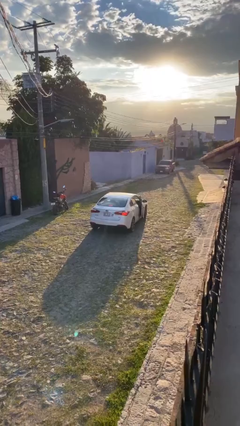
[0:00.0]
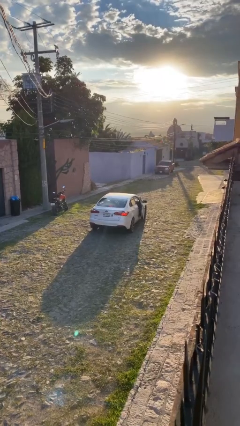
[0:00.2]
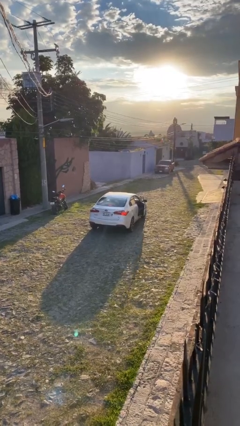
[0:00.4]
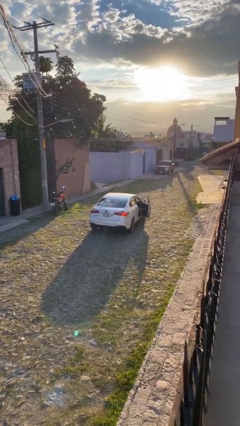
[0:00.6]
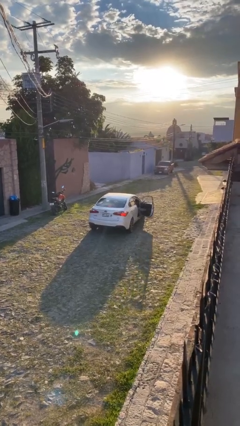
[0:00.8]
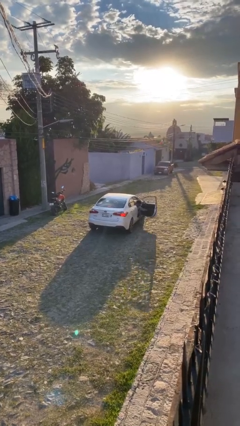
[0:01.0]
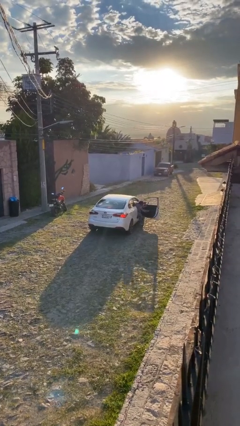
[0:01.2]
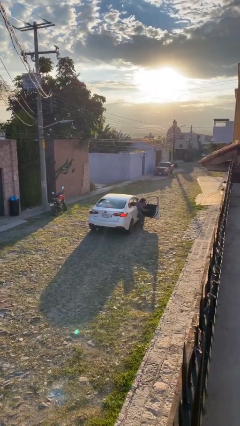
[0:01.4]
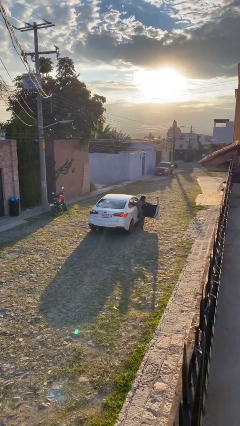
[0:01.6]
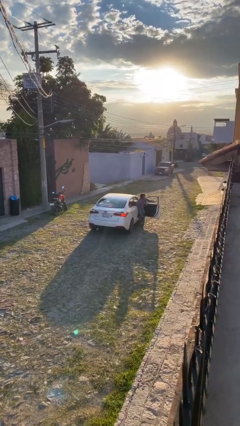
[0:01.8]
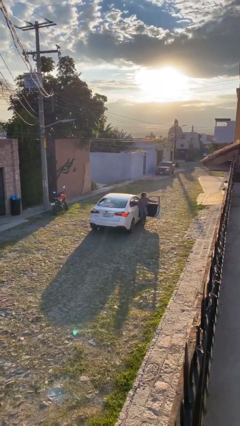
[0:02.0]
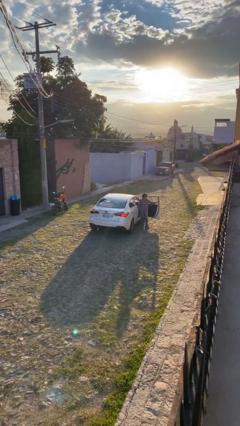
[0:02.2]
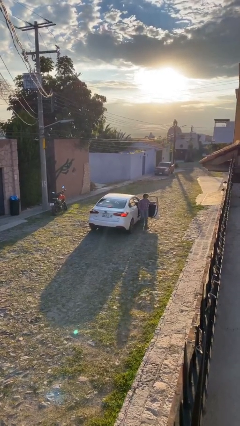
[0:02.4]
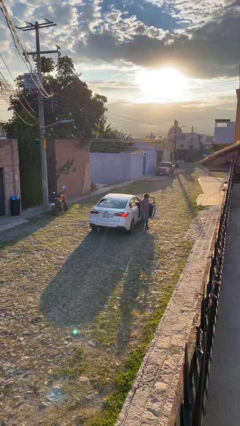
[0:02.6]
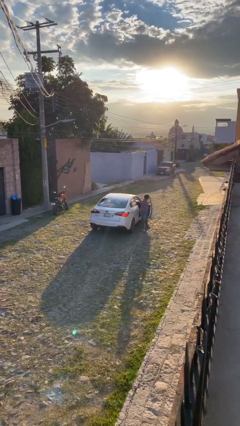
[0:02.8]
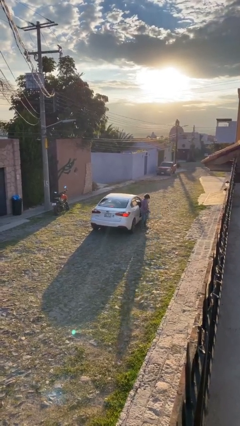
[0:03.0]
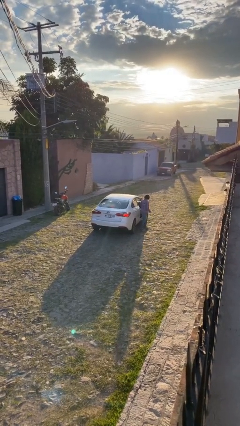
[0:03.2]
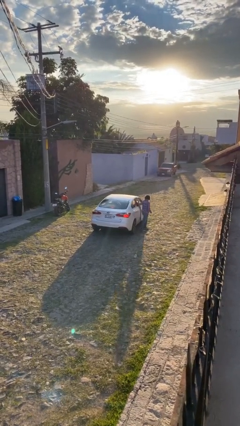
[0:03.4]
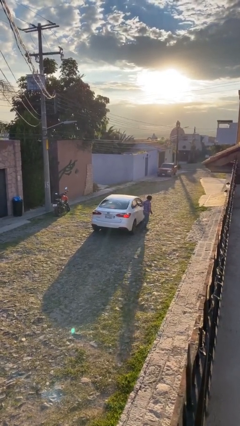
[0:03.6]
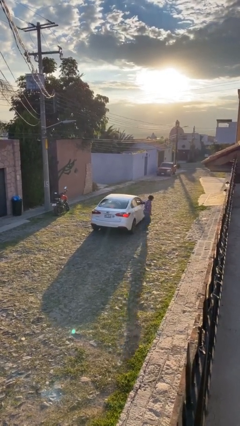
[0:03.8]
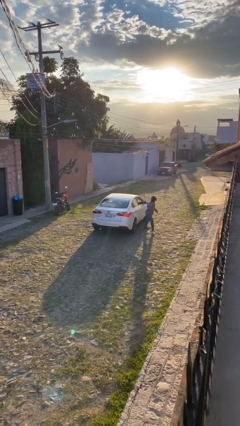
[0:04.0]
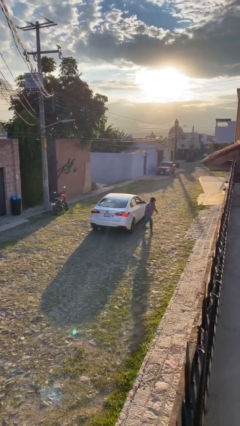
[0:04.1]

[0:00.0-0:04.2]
car drops off person

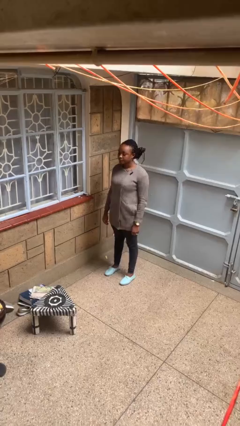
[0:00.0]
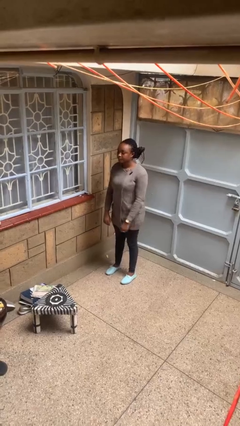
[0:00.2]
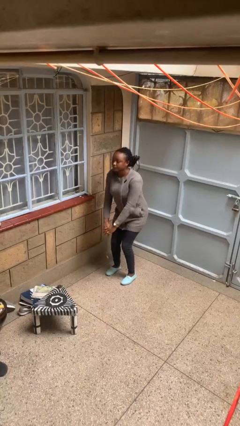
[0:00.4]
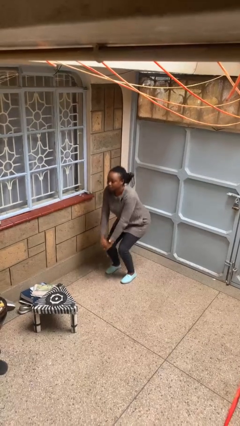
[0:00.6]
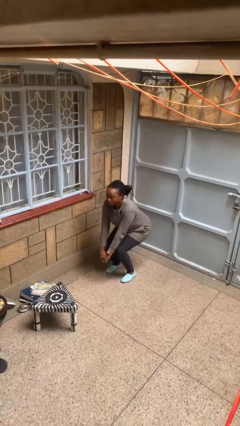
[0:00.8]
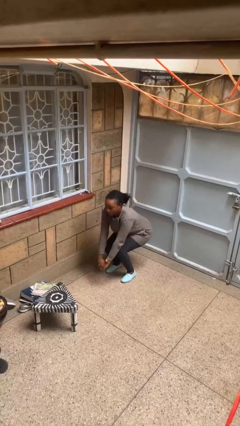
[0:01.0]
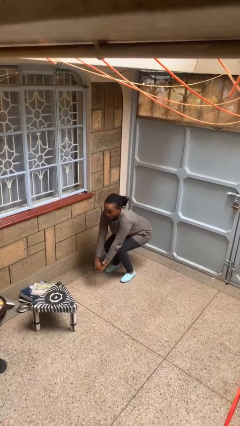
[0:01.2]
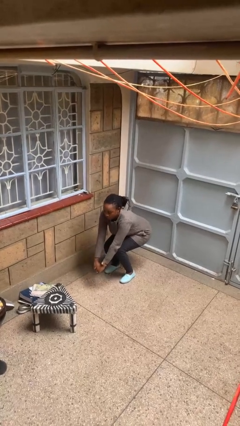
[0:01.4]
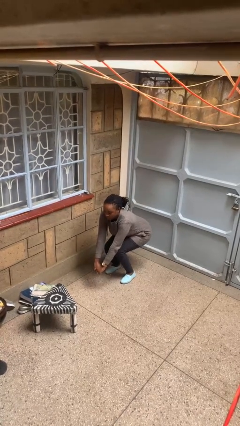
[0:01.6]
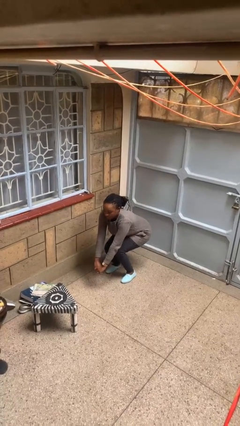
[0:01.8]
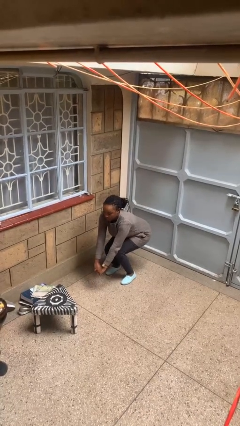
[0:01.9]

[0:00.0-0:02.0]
person squats

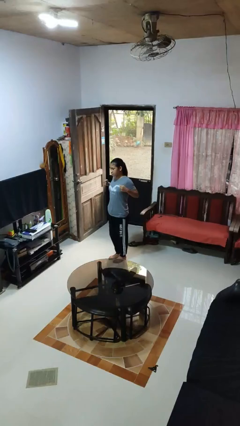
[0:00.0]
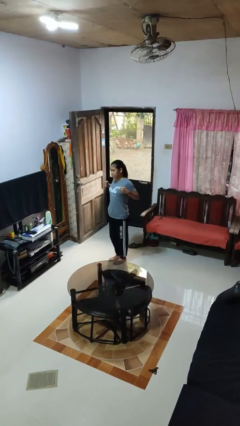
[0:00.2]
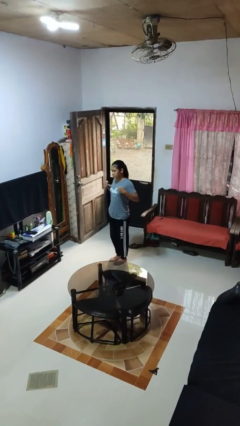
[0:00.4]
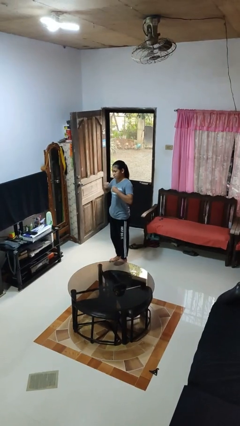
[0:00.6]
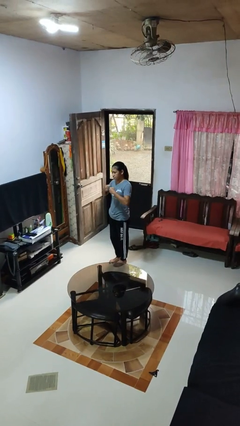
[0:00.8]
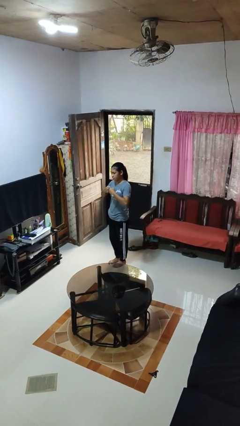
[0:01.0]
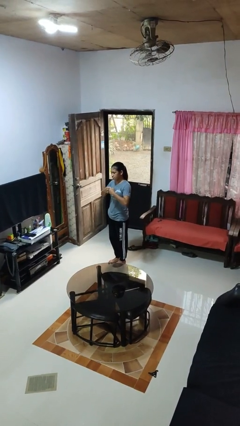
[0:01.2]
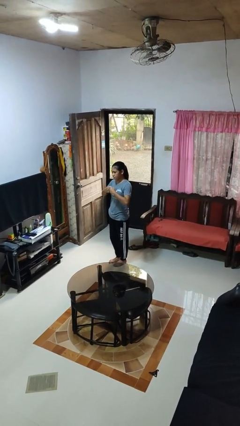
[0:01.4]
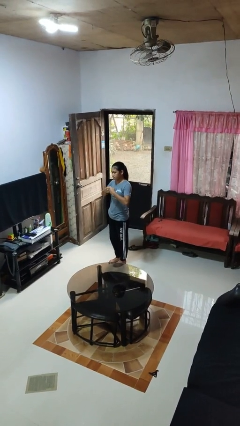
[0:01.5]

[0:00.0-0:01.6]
person gestures zoom out

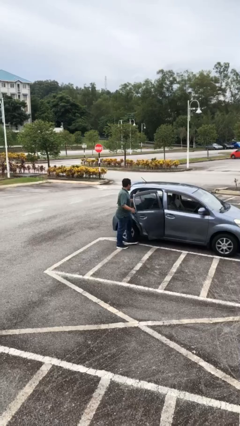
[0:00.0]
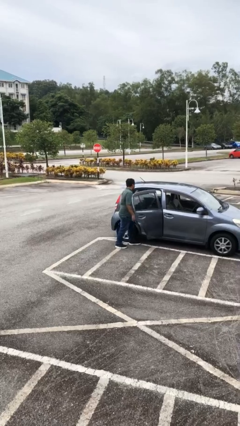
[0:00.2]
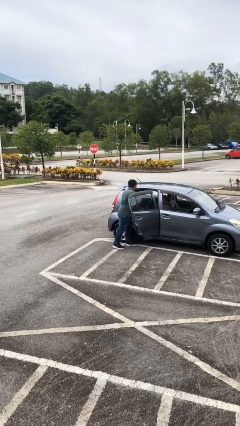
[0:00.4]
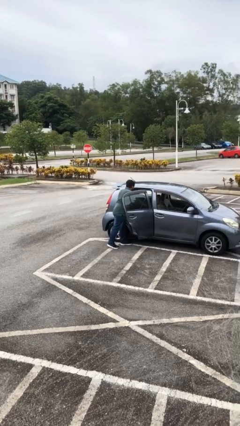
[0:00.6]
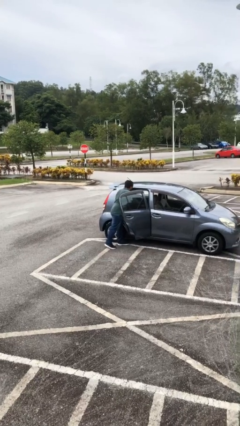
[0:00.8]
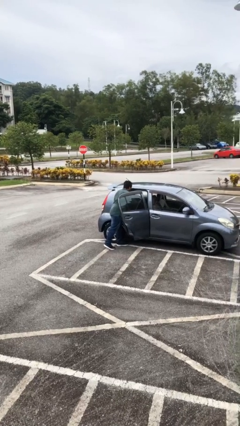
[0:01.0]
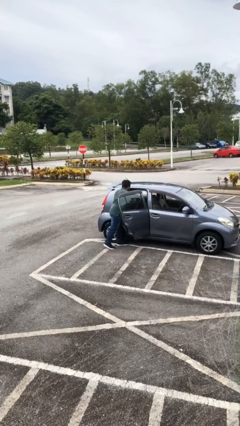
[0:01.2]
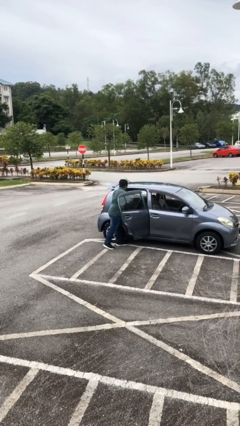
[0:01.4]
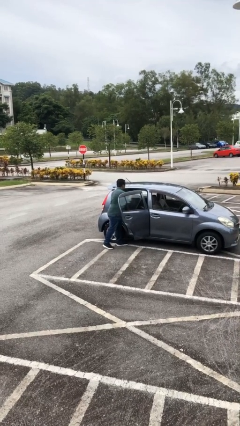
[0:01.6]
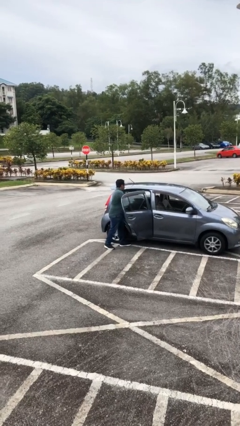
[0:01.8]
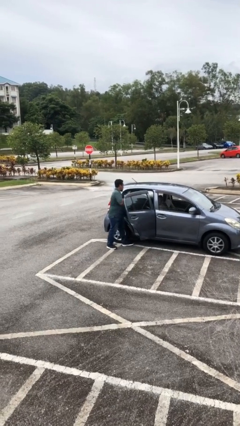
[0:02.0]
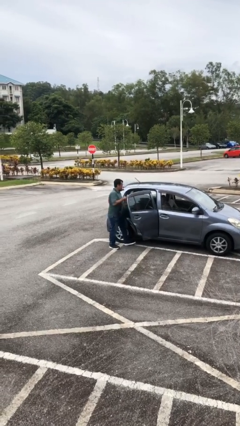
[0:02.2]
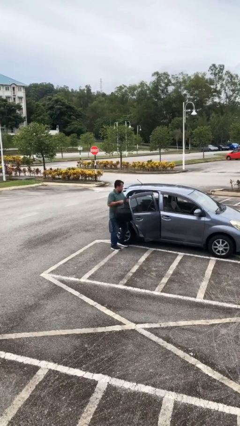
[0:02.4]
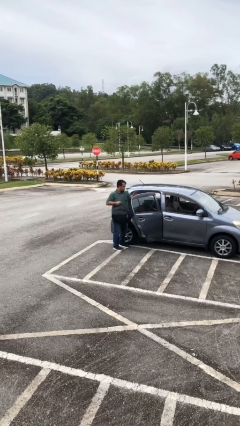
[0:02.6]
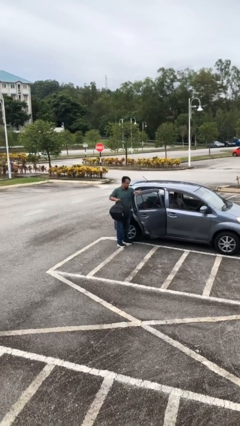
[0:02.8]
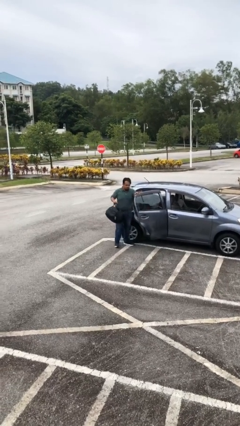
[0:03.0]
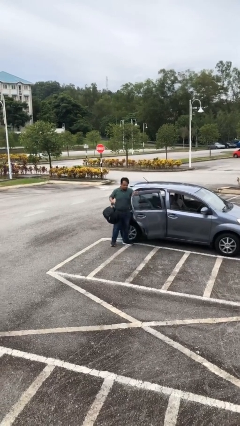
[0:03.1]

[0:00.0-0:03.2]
person unloads car

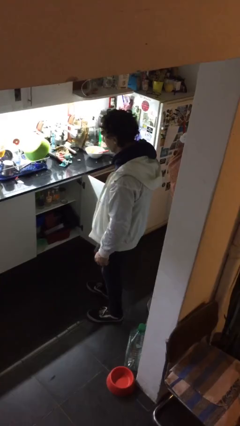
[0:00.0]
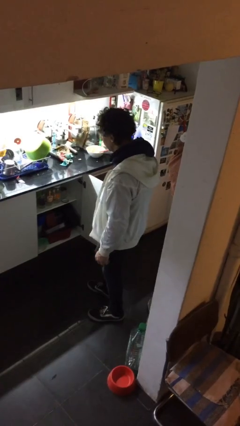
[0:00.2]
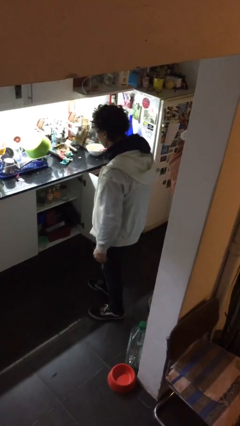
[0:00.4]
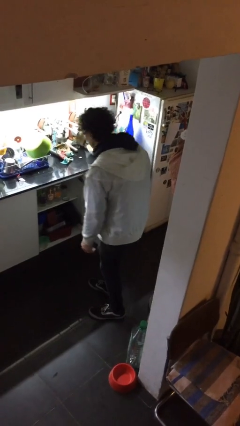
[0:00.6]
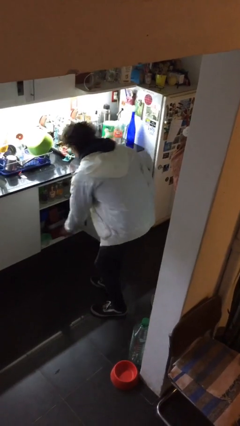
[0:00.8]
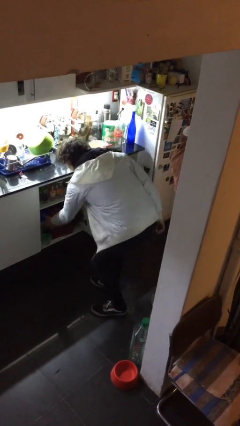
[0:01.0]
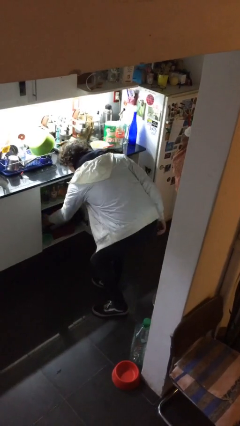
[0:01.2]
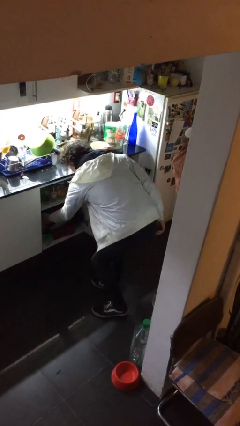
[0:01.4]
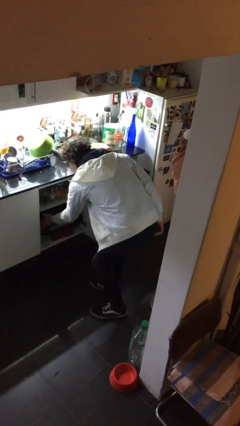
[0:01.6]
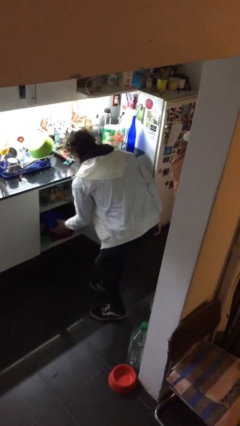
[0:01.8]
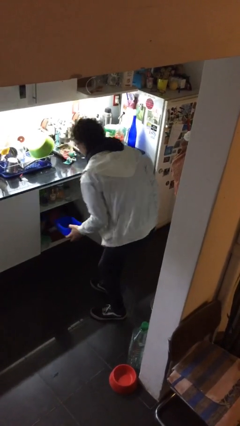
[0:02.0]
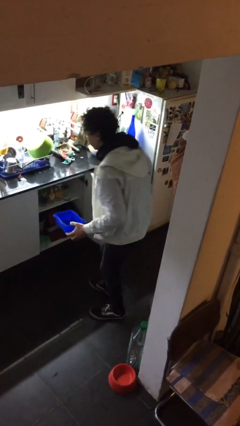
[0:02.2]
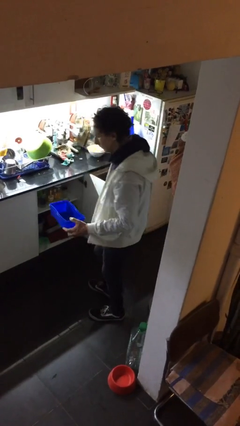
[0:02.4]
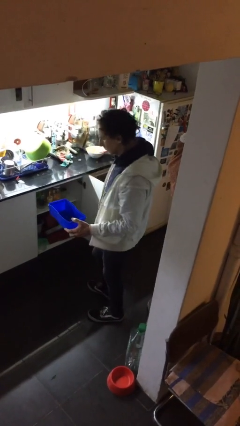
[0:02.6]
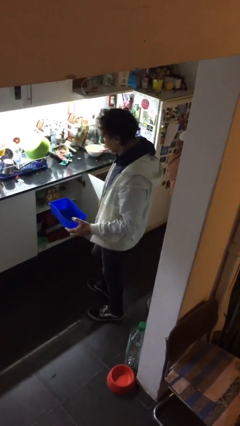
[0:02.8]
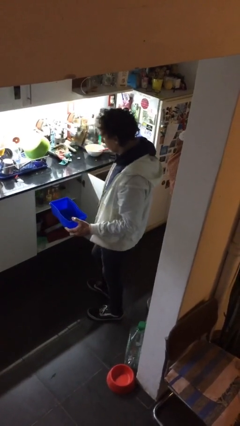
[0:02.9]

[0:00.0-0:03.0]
person picks up object from cabinet

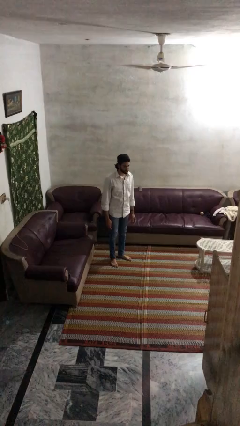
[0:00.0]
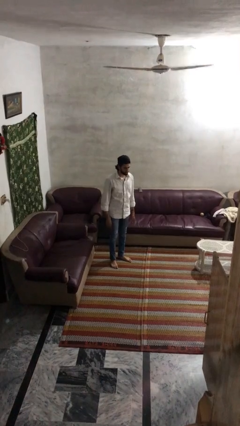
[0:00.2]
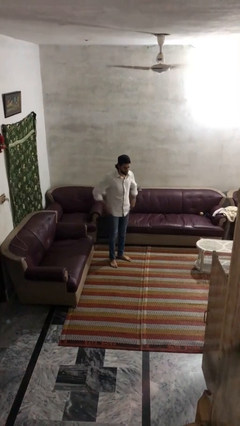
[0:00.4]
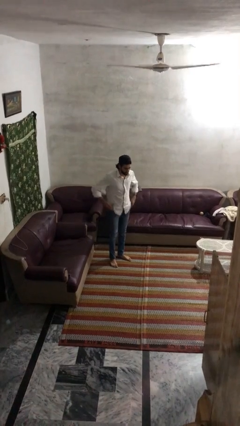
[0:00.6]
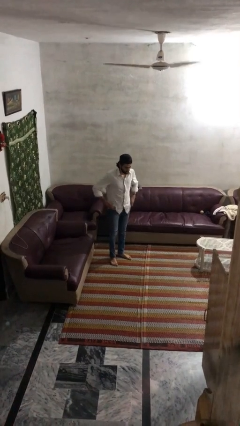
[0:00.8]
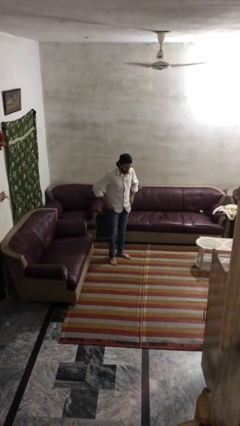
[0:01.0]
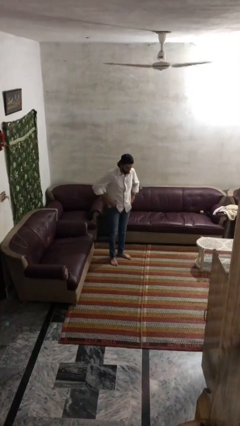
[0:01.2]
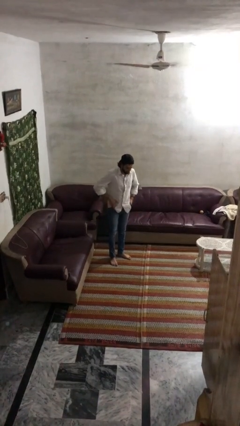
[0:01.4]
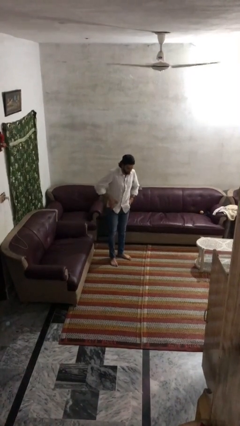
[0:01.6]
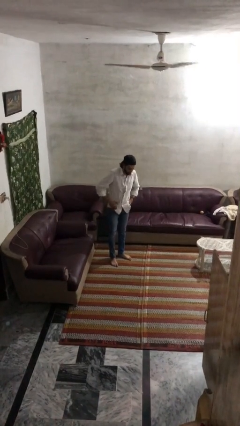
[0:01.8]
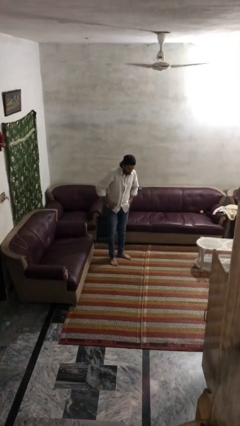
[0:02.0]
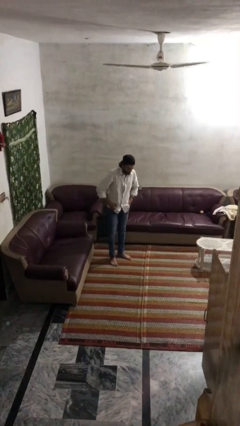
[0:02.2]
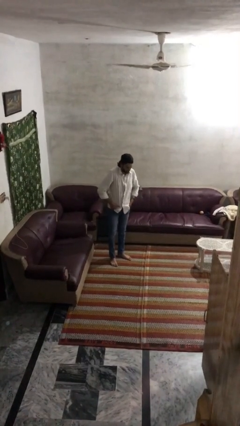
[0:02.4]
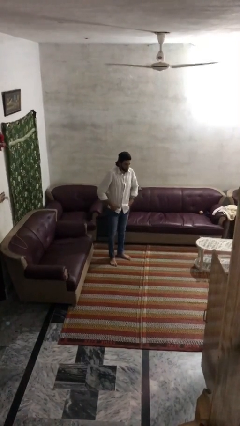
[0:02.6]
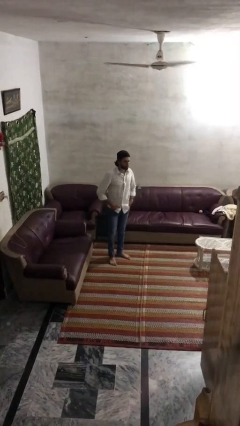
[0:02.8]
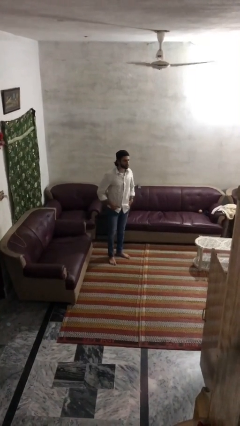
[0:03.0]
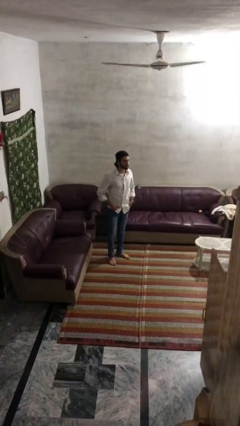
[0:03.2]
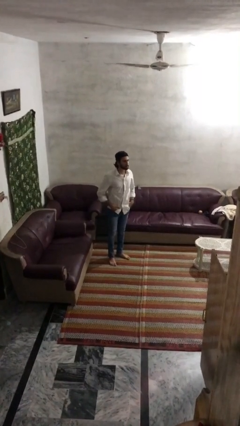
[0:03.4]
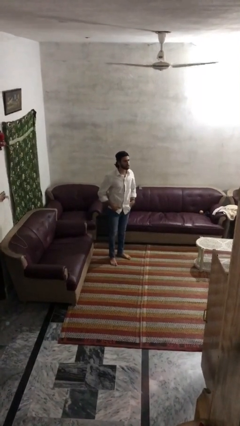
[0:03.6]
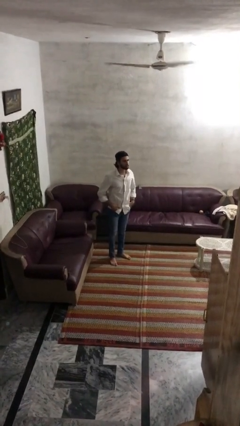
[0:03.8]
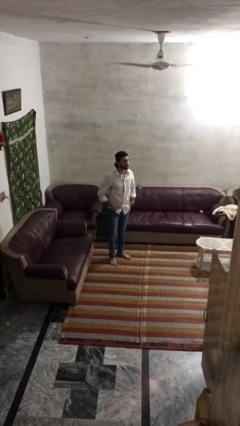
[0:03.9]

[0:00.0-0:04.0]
person puts hands in back pockets
